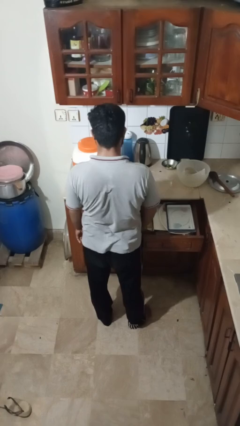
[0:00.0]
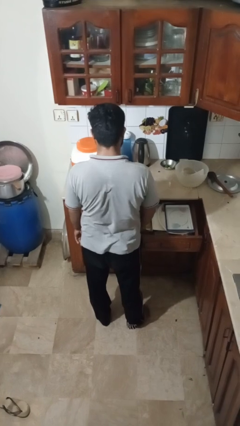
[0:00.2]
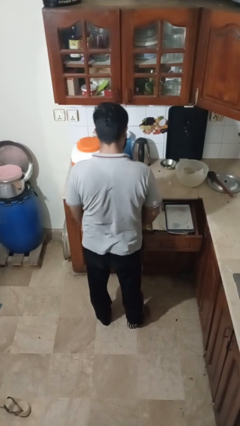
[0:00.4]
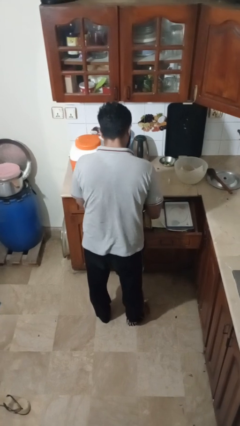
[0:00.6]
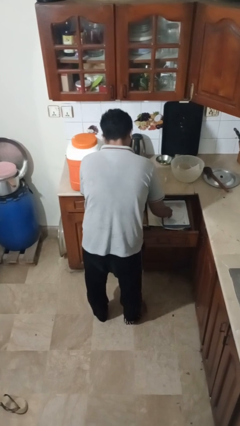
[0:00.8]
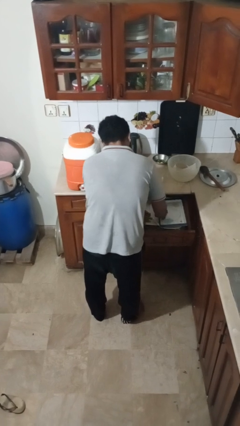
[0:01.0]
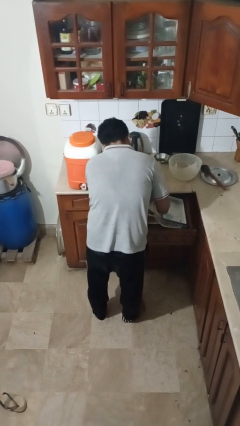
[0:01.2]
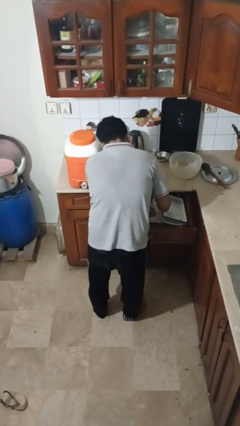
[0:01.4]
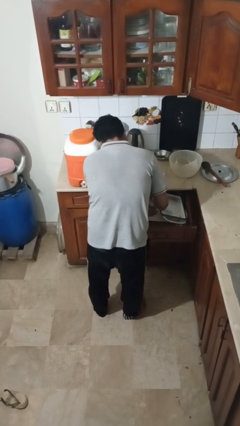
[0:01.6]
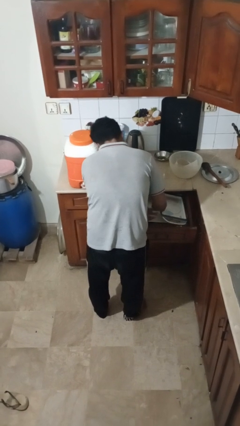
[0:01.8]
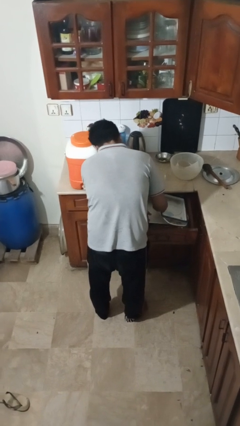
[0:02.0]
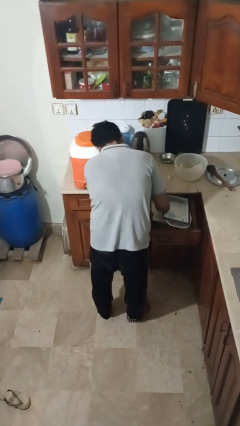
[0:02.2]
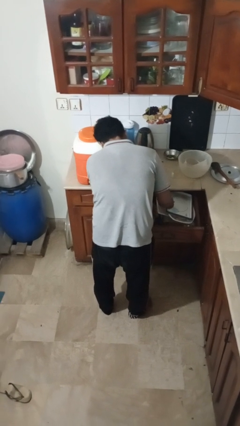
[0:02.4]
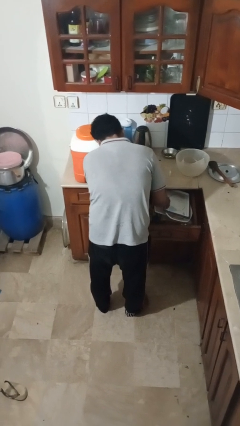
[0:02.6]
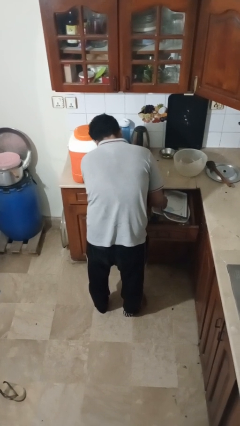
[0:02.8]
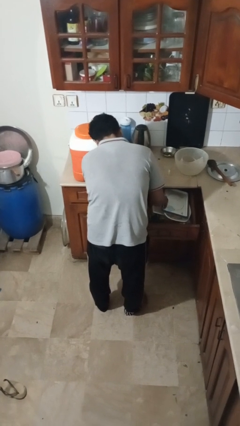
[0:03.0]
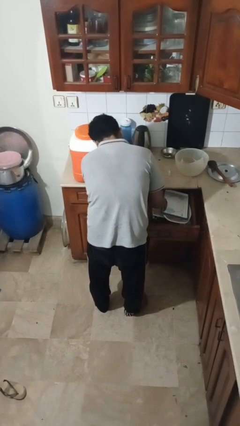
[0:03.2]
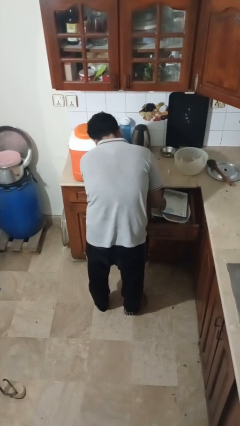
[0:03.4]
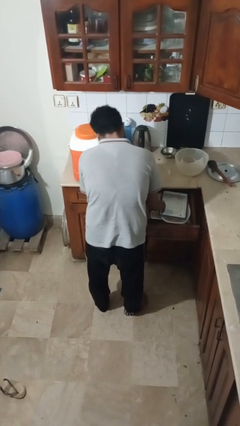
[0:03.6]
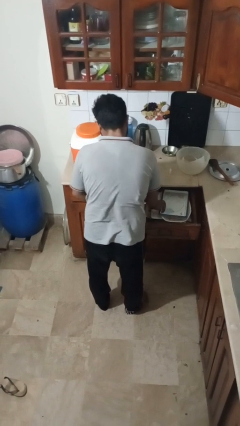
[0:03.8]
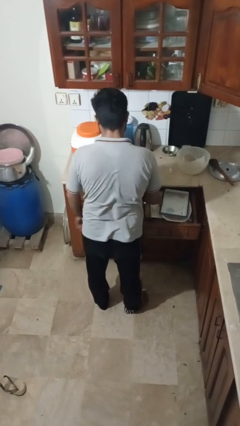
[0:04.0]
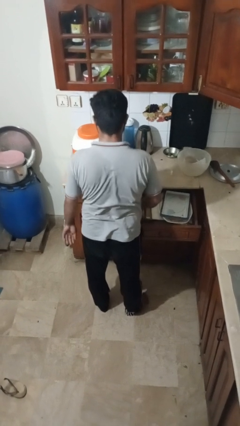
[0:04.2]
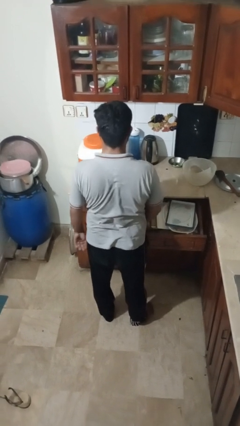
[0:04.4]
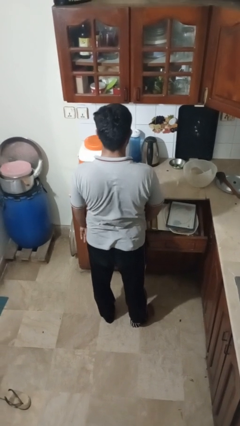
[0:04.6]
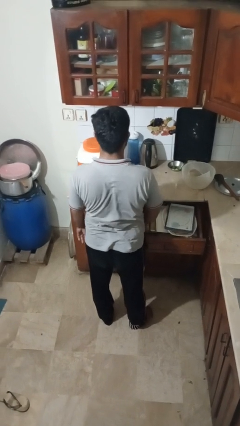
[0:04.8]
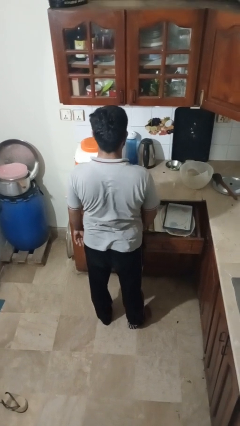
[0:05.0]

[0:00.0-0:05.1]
person searches in kitchen drawer

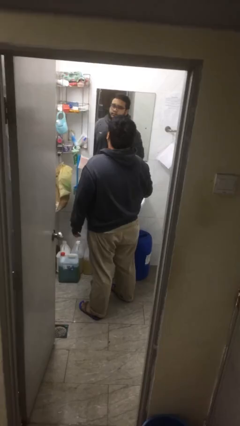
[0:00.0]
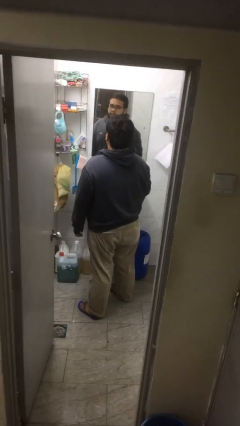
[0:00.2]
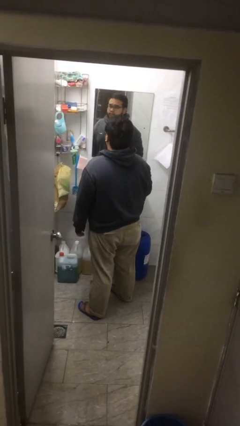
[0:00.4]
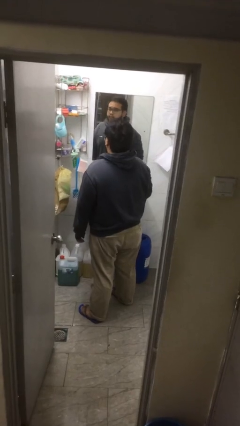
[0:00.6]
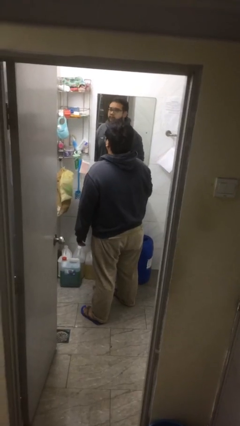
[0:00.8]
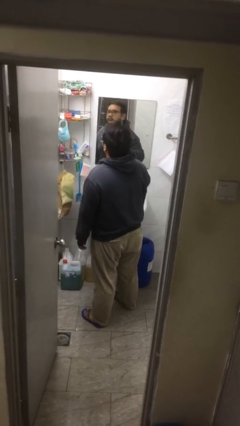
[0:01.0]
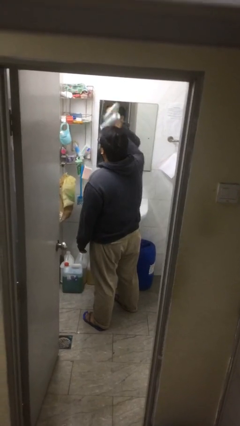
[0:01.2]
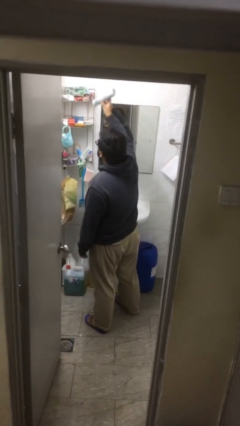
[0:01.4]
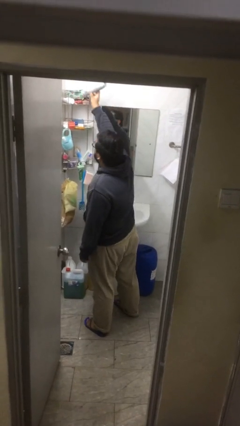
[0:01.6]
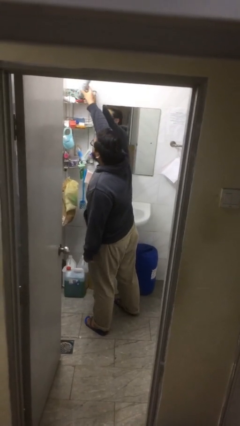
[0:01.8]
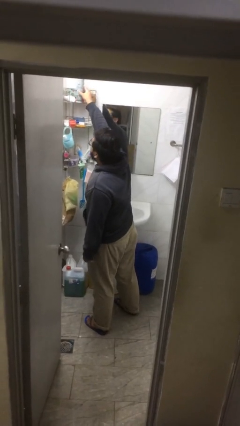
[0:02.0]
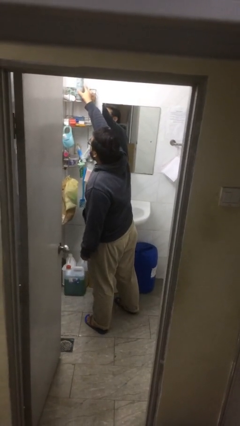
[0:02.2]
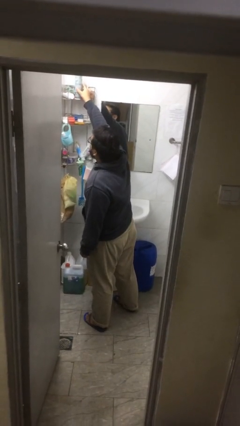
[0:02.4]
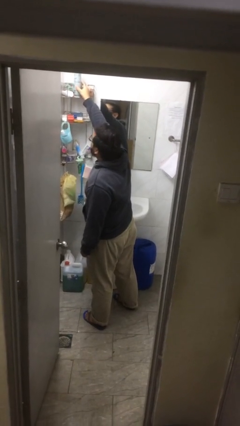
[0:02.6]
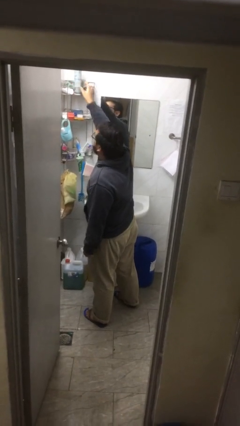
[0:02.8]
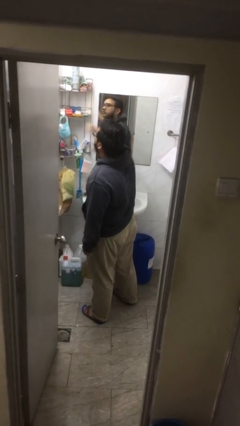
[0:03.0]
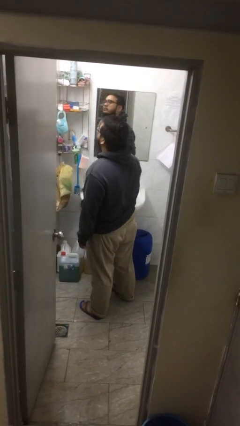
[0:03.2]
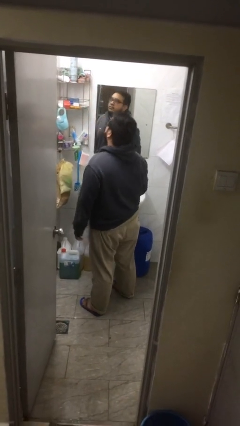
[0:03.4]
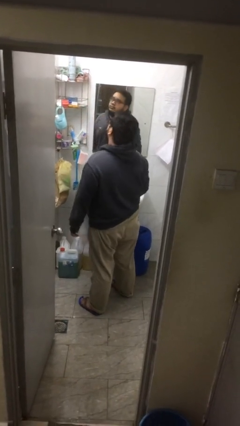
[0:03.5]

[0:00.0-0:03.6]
person puts down object on countertop

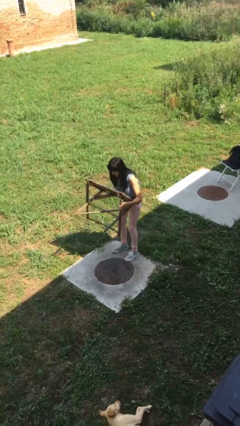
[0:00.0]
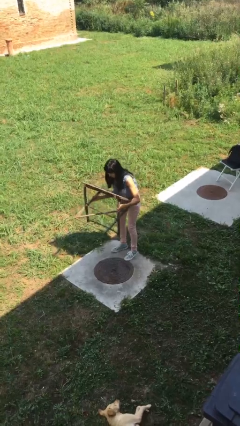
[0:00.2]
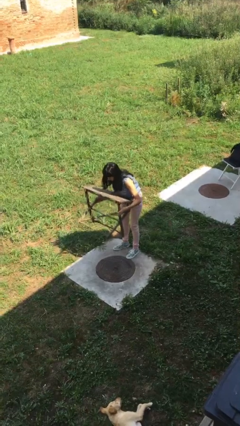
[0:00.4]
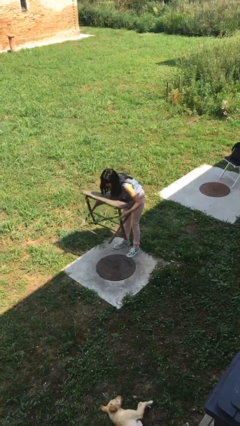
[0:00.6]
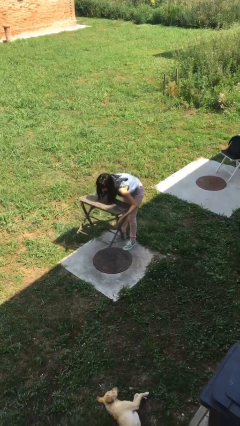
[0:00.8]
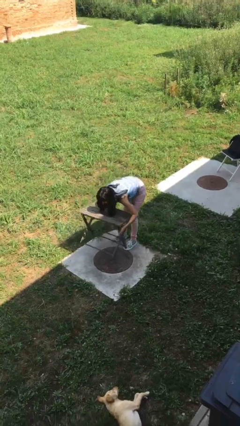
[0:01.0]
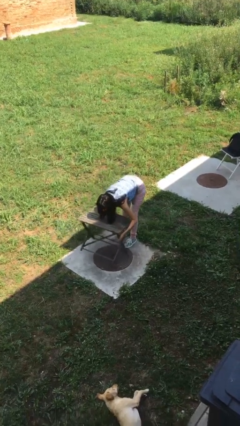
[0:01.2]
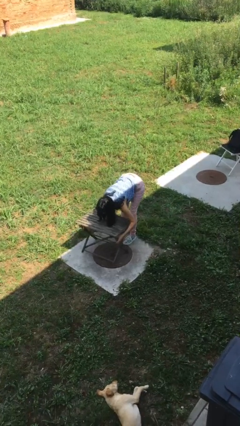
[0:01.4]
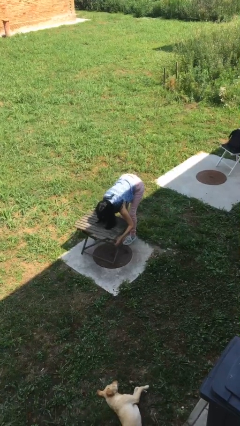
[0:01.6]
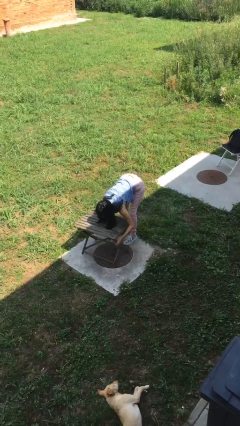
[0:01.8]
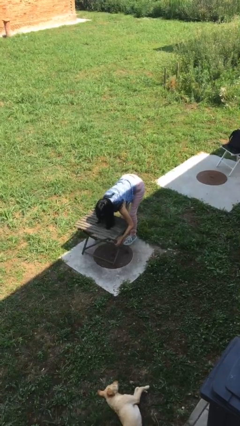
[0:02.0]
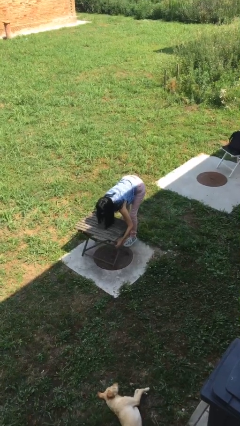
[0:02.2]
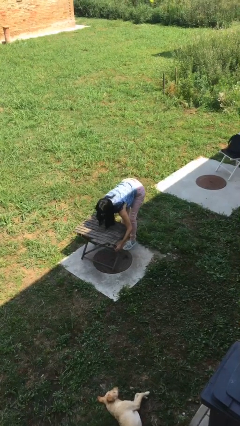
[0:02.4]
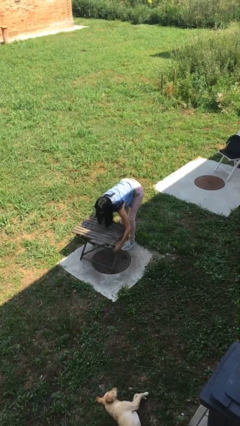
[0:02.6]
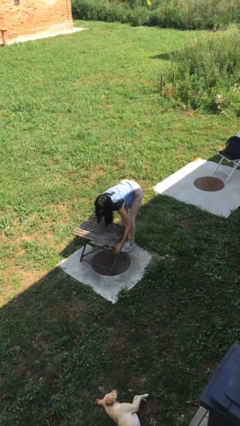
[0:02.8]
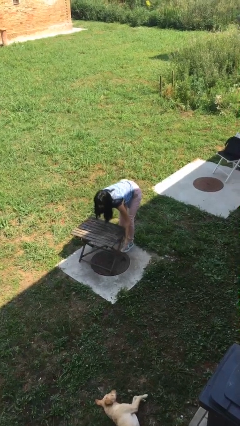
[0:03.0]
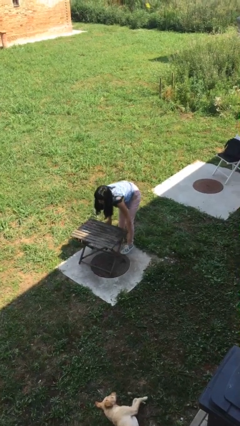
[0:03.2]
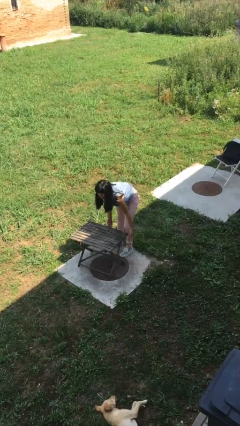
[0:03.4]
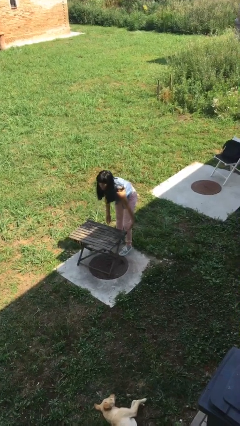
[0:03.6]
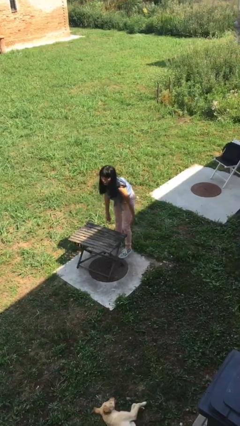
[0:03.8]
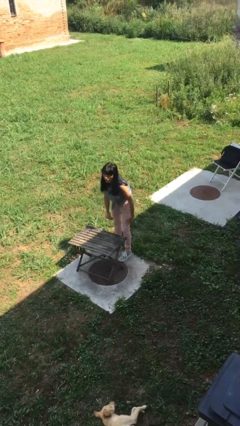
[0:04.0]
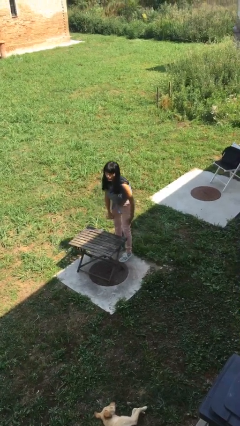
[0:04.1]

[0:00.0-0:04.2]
person puts down object on floor

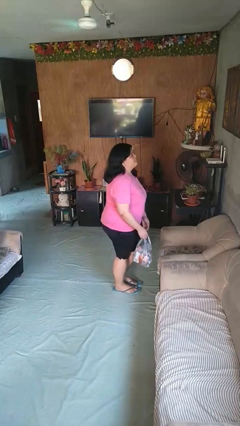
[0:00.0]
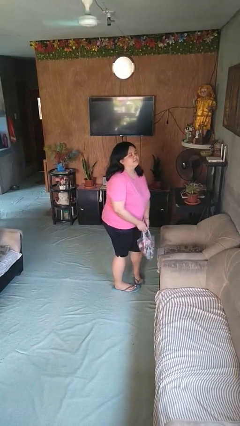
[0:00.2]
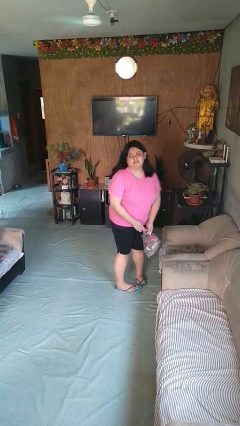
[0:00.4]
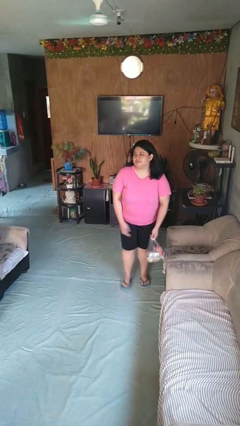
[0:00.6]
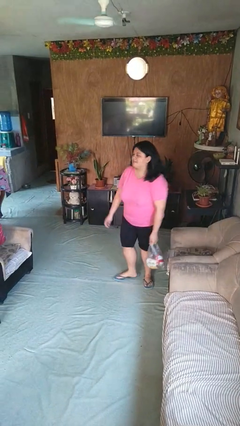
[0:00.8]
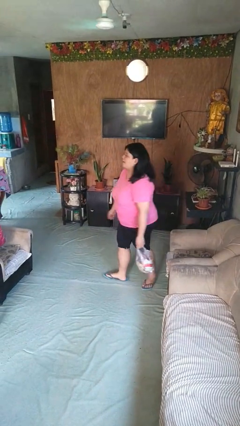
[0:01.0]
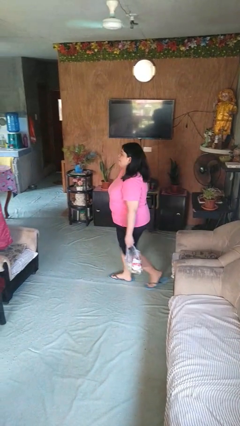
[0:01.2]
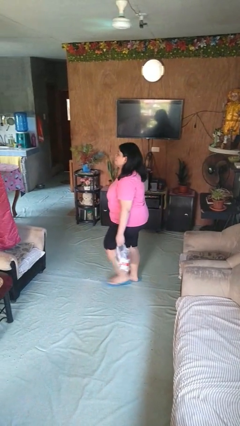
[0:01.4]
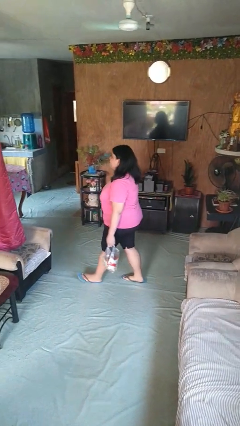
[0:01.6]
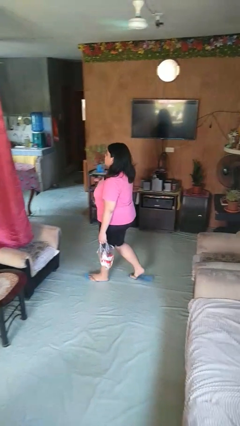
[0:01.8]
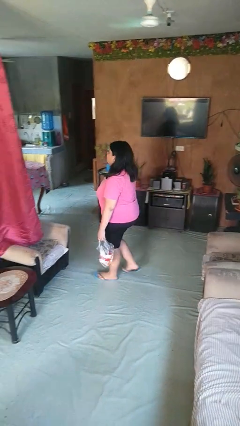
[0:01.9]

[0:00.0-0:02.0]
person carries groceries

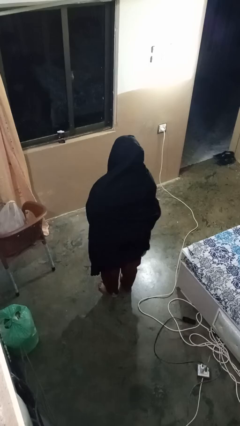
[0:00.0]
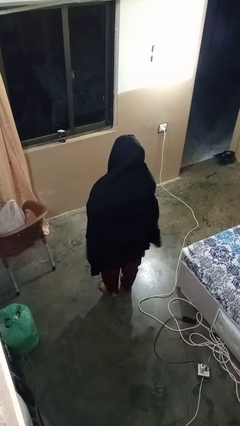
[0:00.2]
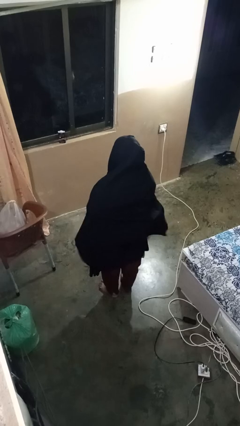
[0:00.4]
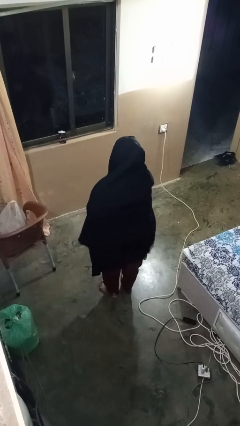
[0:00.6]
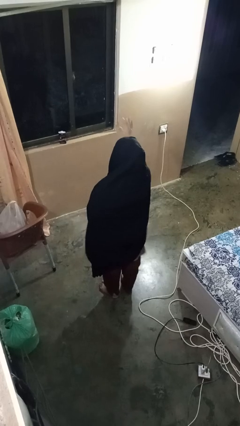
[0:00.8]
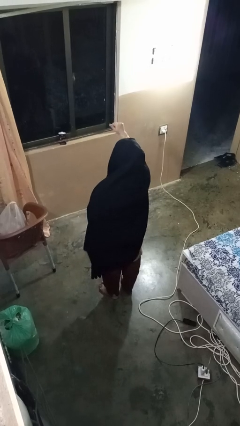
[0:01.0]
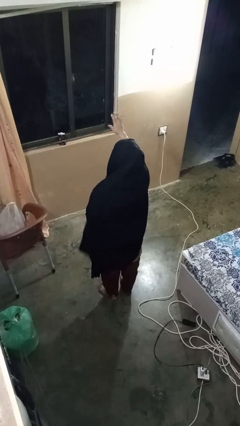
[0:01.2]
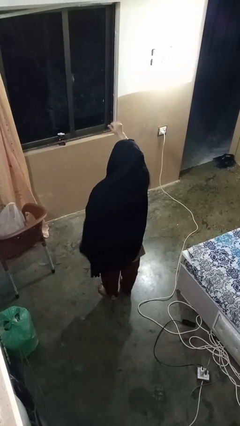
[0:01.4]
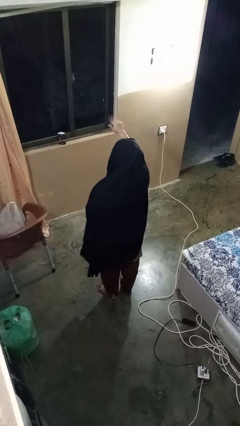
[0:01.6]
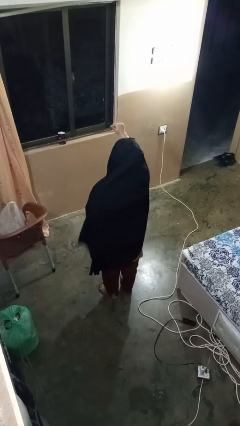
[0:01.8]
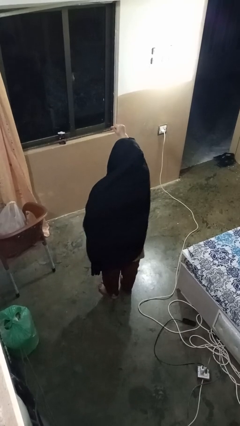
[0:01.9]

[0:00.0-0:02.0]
person gestures come here

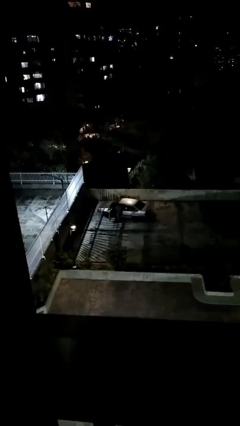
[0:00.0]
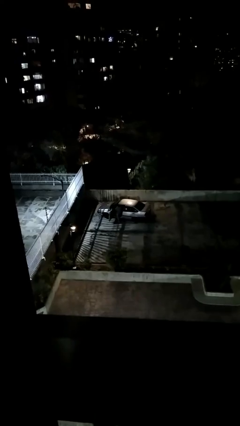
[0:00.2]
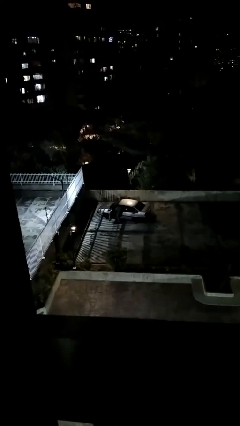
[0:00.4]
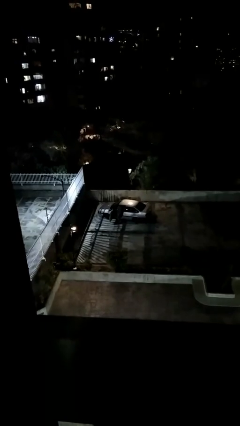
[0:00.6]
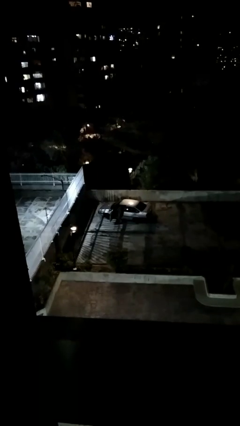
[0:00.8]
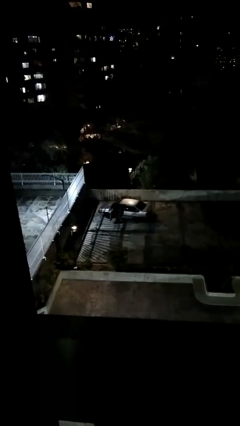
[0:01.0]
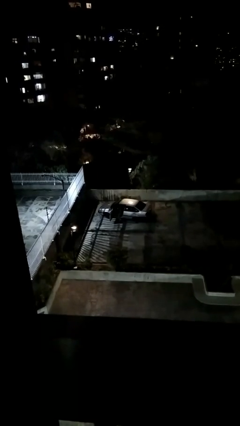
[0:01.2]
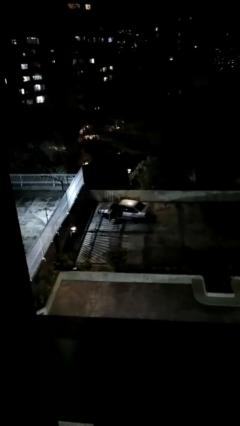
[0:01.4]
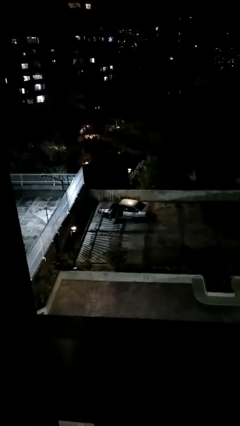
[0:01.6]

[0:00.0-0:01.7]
person enters car
